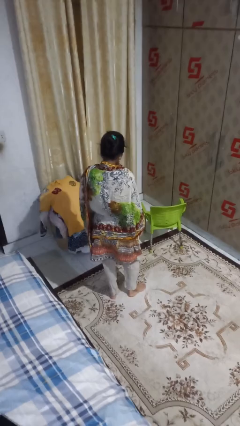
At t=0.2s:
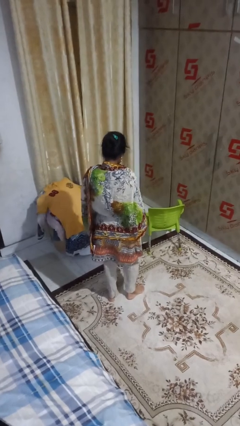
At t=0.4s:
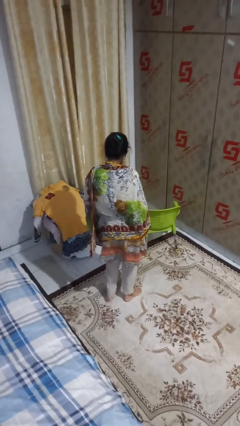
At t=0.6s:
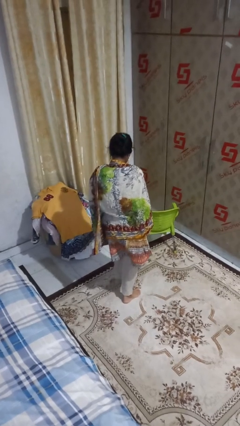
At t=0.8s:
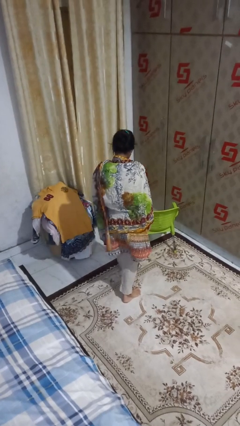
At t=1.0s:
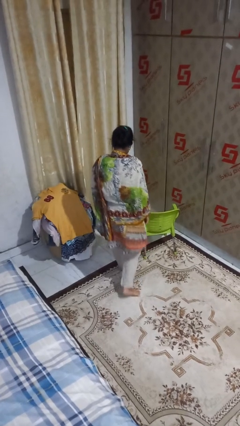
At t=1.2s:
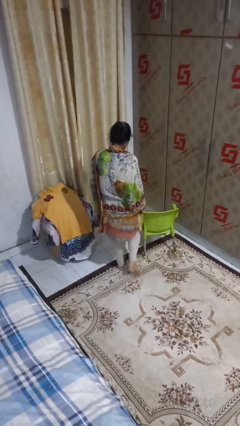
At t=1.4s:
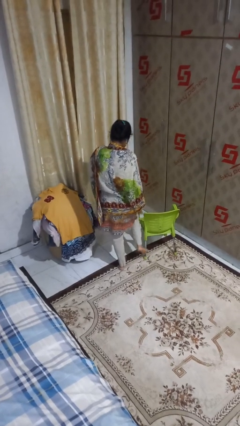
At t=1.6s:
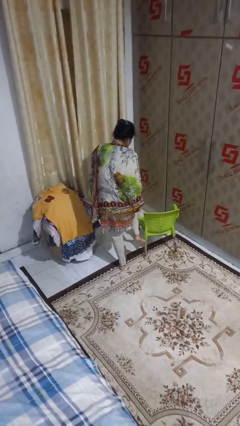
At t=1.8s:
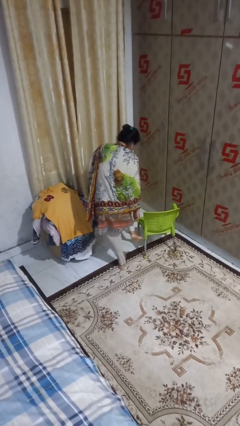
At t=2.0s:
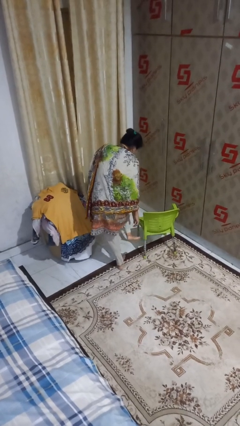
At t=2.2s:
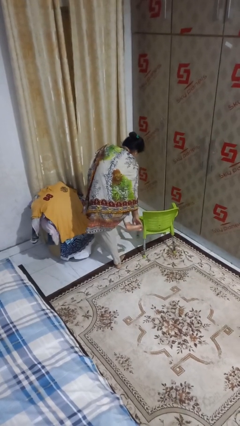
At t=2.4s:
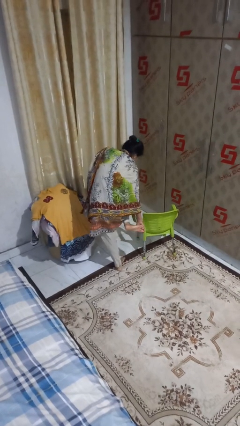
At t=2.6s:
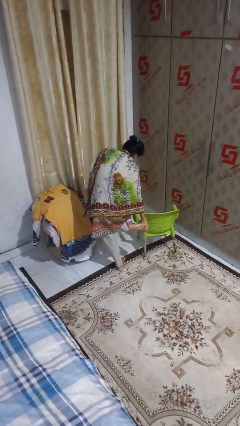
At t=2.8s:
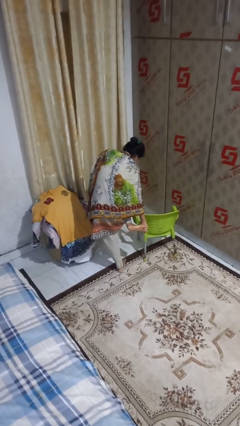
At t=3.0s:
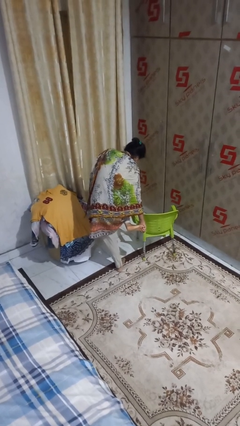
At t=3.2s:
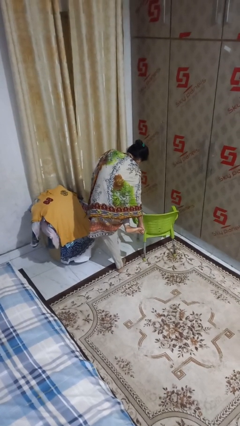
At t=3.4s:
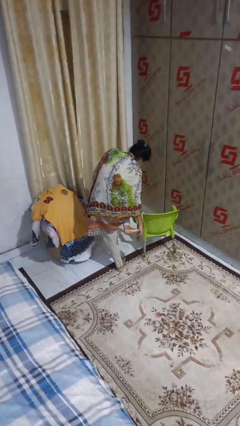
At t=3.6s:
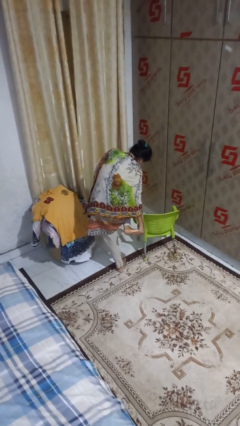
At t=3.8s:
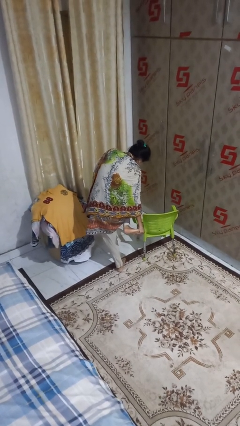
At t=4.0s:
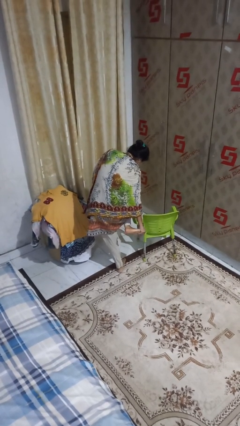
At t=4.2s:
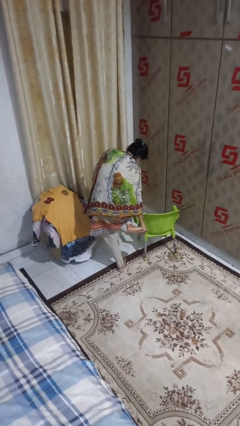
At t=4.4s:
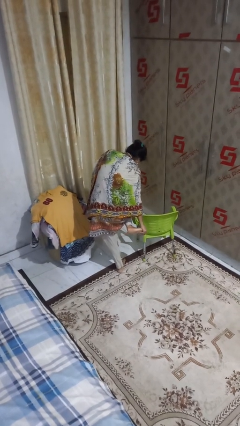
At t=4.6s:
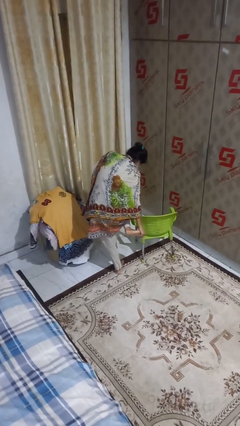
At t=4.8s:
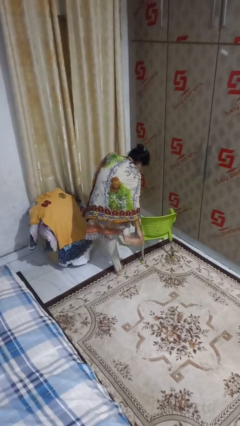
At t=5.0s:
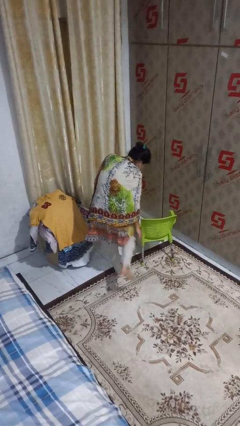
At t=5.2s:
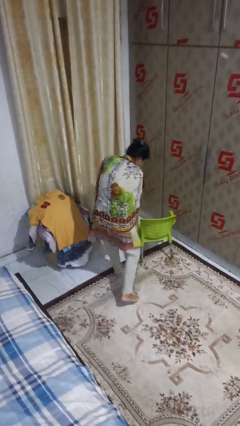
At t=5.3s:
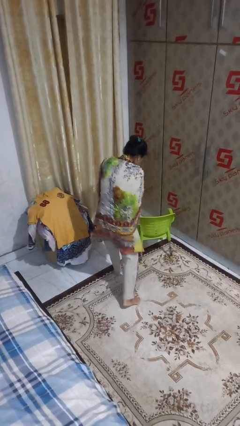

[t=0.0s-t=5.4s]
person stubs toe

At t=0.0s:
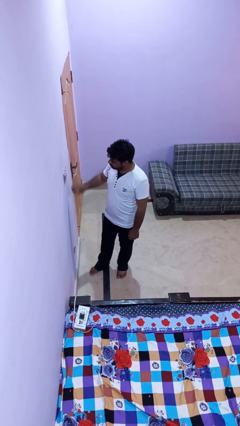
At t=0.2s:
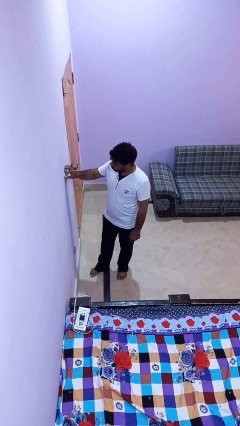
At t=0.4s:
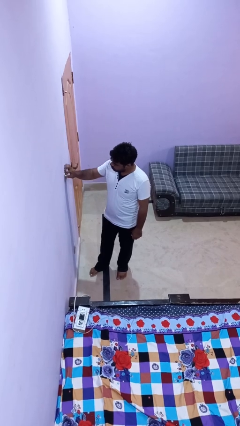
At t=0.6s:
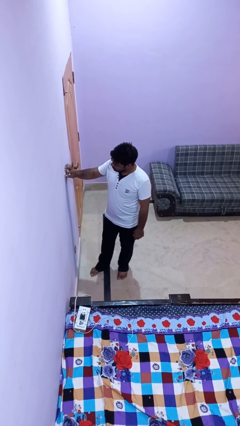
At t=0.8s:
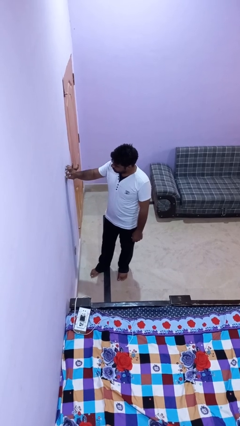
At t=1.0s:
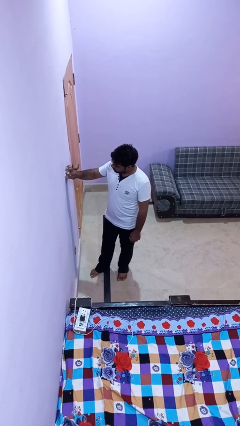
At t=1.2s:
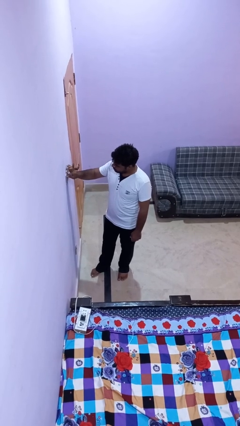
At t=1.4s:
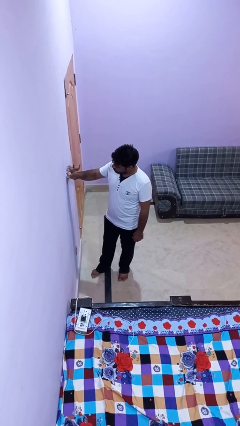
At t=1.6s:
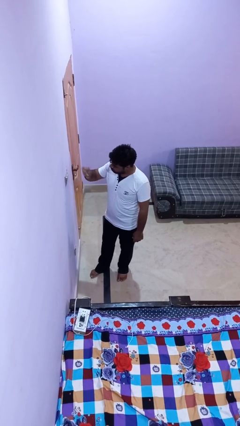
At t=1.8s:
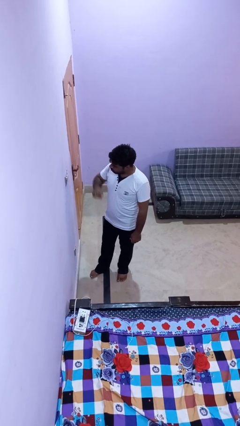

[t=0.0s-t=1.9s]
person adjusts thermostat

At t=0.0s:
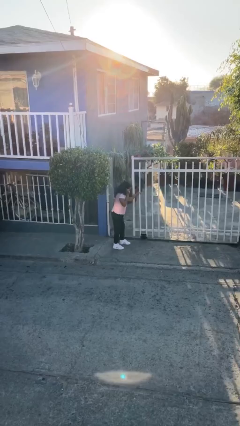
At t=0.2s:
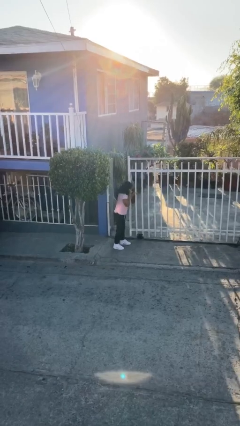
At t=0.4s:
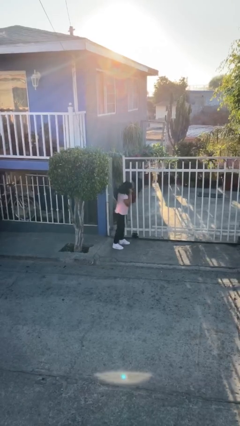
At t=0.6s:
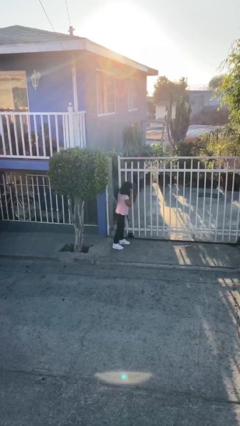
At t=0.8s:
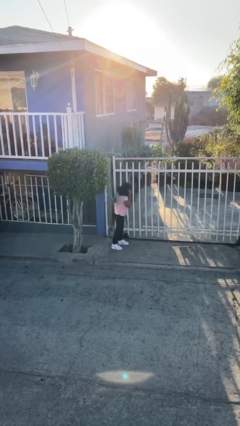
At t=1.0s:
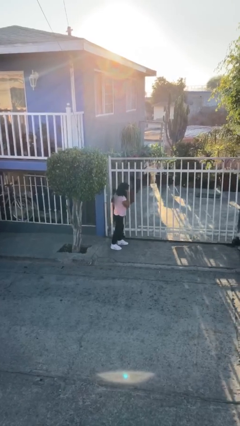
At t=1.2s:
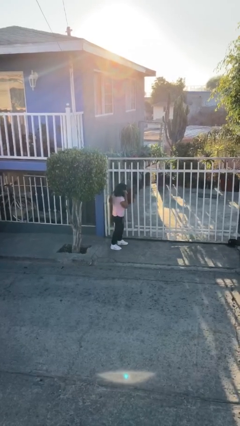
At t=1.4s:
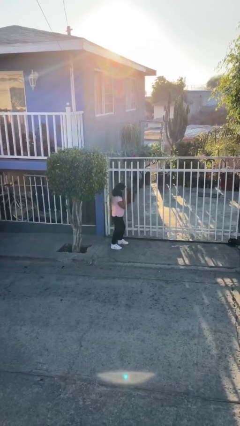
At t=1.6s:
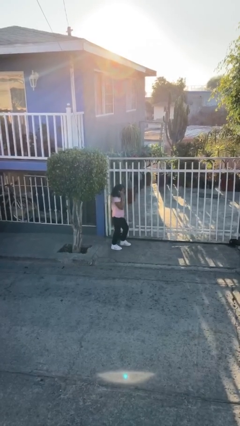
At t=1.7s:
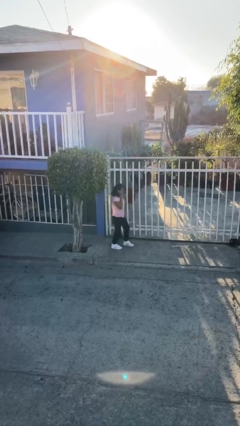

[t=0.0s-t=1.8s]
person closes facility door

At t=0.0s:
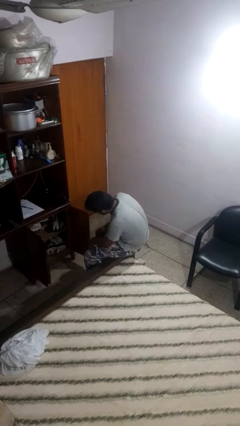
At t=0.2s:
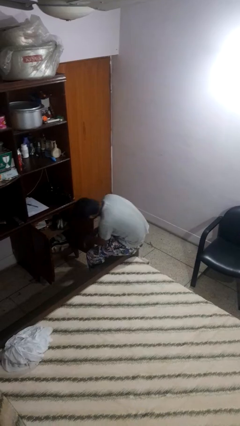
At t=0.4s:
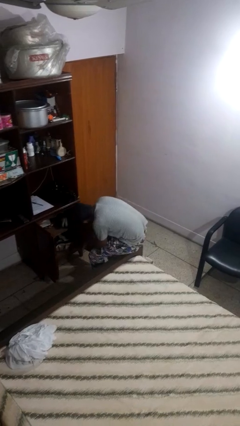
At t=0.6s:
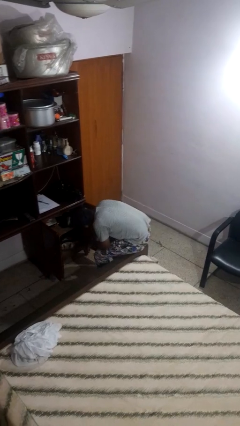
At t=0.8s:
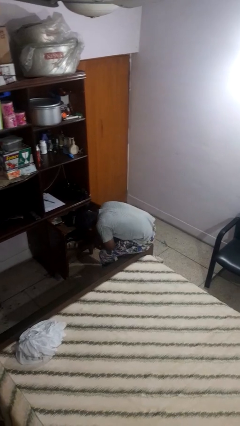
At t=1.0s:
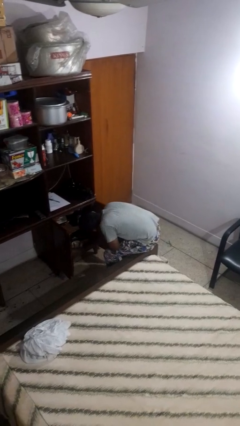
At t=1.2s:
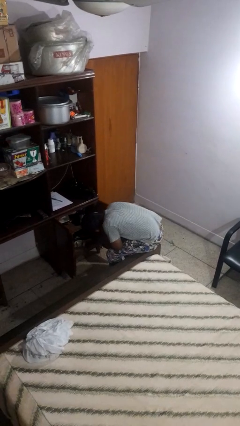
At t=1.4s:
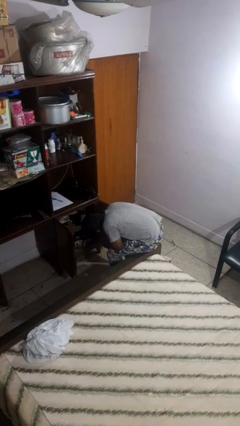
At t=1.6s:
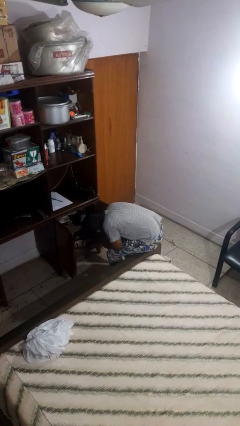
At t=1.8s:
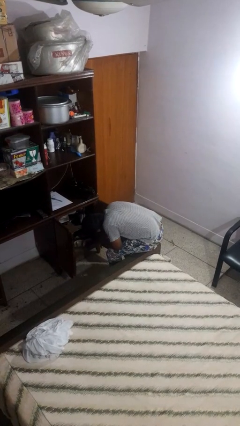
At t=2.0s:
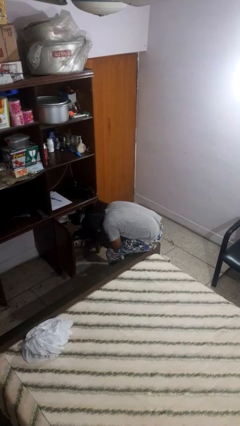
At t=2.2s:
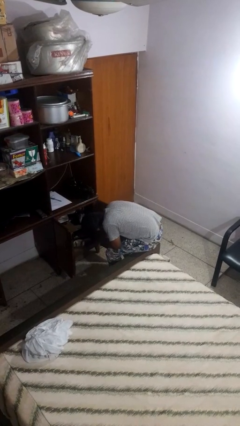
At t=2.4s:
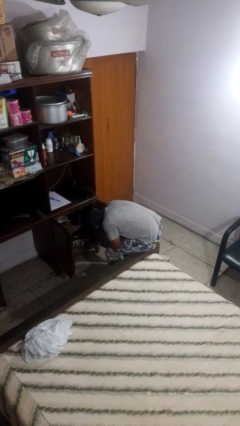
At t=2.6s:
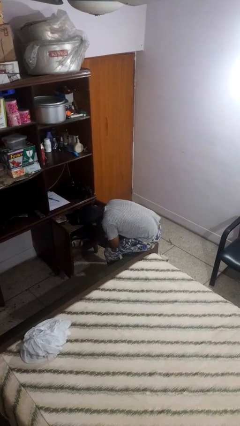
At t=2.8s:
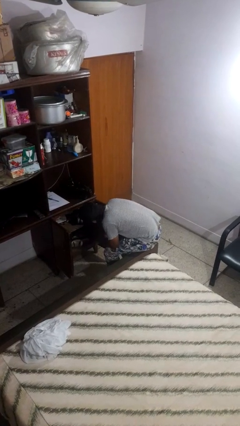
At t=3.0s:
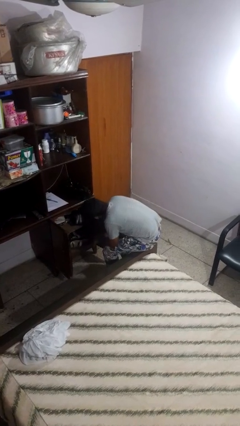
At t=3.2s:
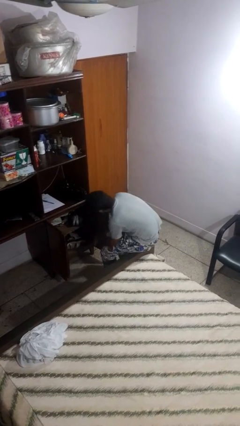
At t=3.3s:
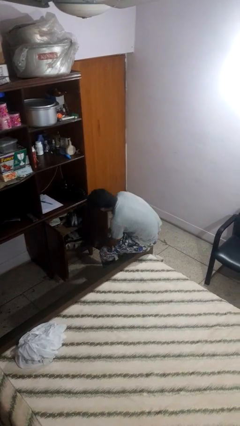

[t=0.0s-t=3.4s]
person searches in cabinet

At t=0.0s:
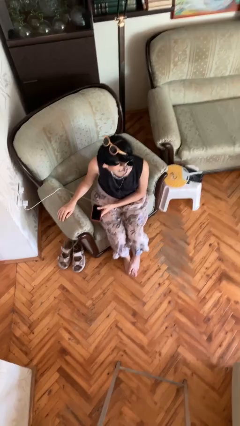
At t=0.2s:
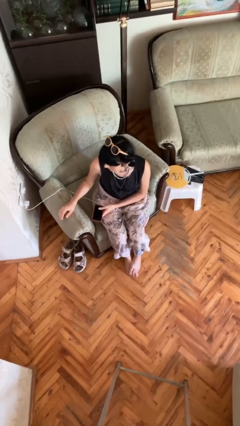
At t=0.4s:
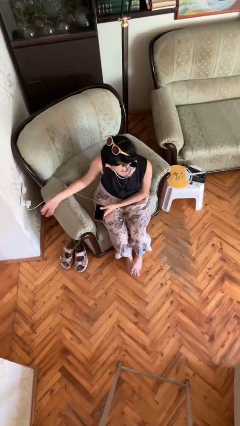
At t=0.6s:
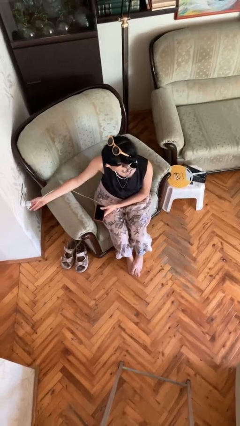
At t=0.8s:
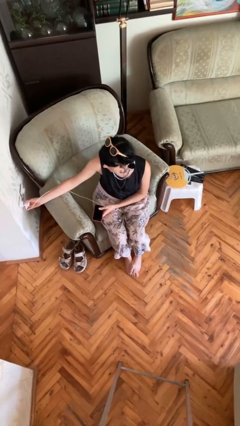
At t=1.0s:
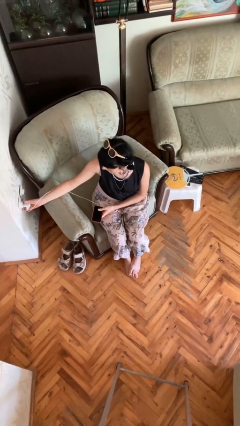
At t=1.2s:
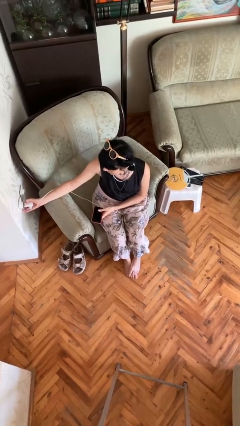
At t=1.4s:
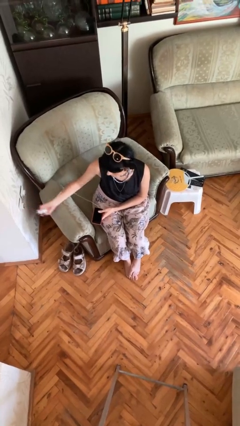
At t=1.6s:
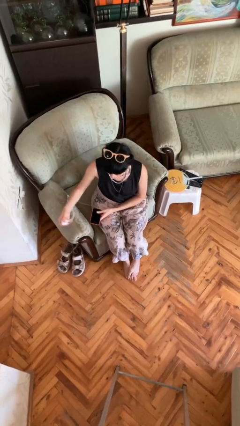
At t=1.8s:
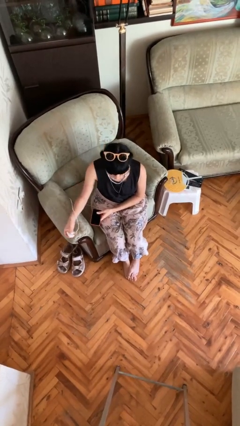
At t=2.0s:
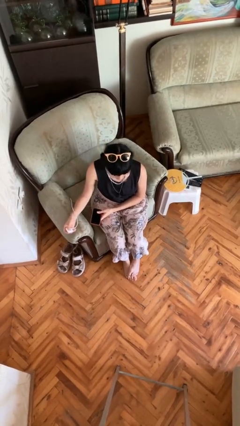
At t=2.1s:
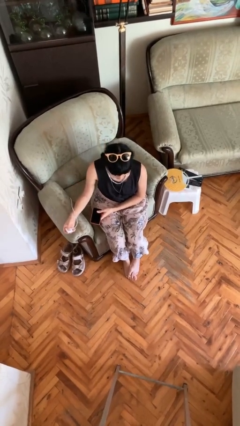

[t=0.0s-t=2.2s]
person unplugs from electrical socket

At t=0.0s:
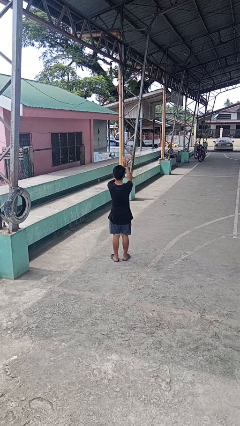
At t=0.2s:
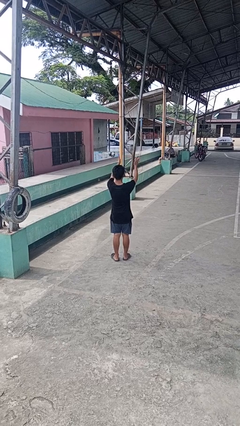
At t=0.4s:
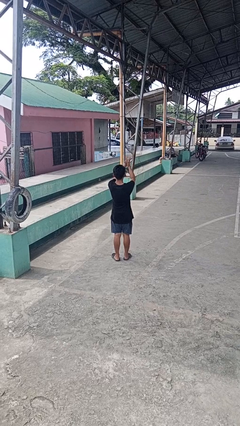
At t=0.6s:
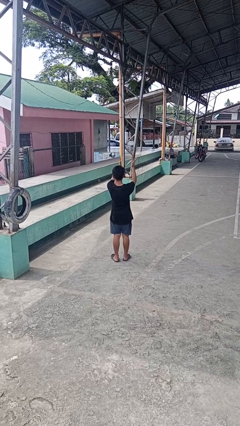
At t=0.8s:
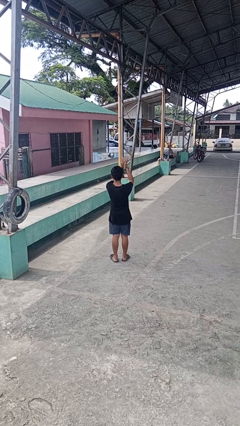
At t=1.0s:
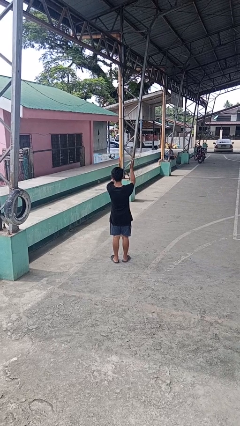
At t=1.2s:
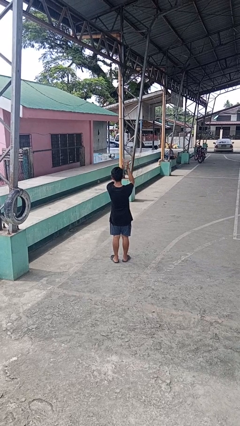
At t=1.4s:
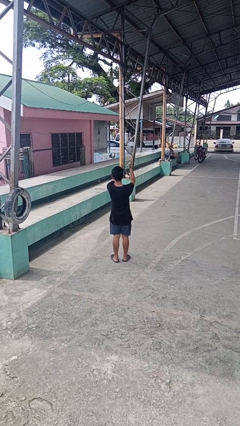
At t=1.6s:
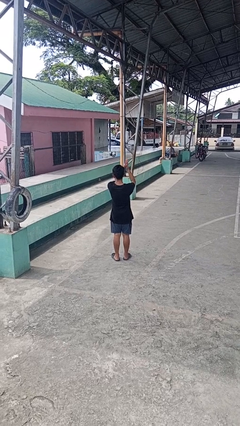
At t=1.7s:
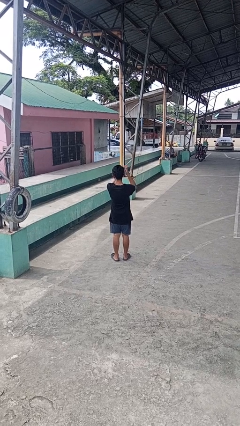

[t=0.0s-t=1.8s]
person claps hands

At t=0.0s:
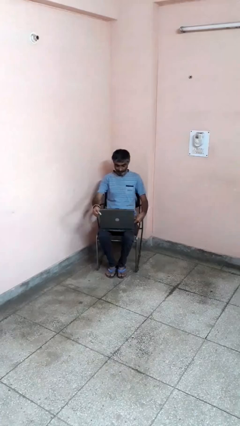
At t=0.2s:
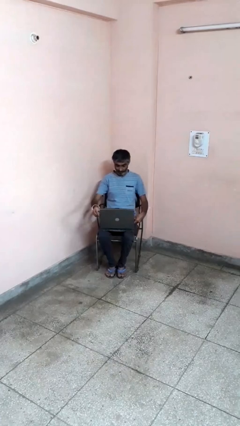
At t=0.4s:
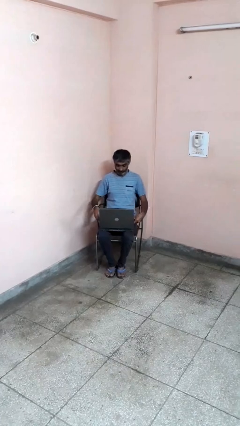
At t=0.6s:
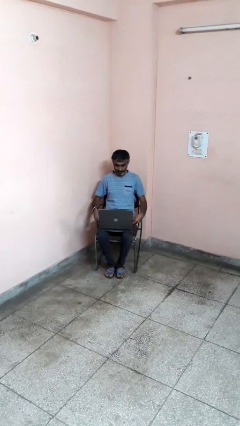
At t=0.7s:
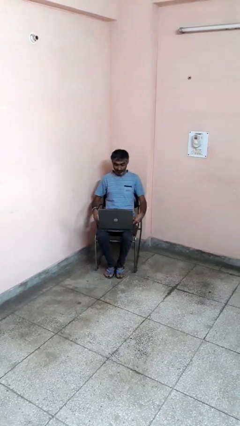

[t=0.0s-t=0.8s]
person opens laptop
